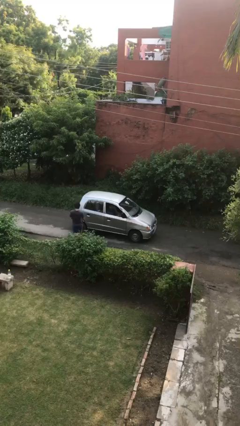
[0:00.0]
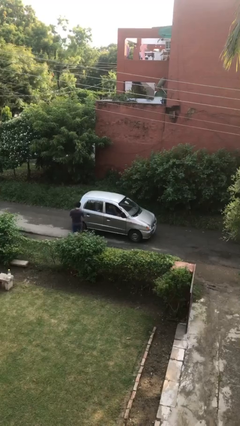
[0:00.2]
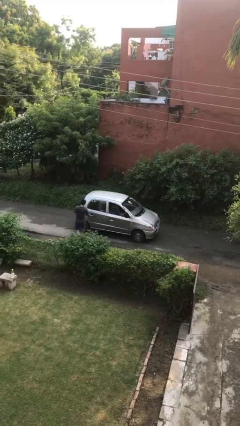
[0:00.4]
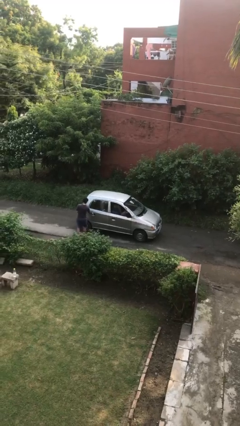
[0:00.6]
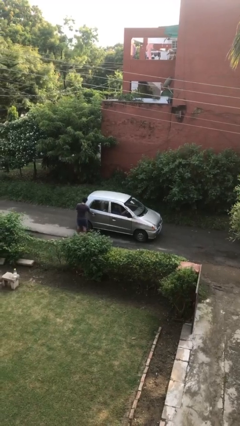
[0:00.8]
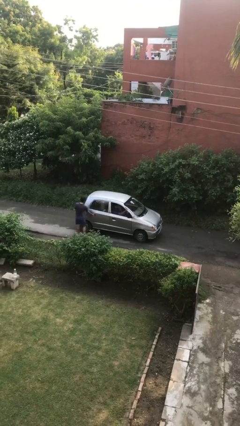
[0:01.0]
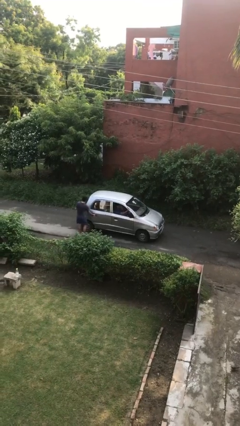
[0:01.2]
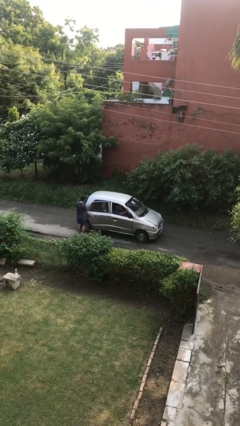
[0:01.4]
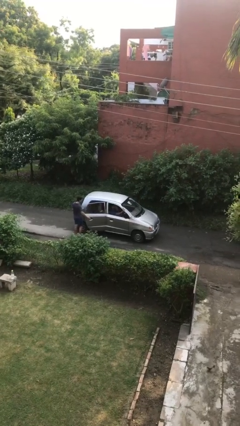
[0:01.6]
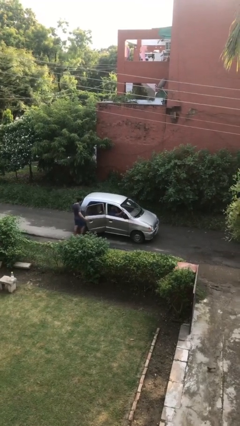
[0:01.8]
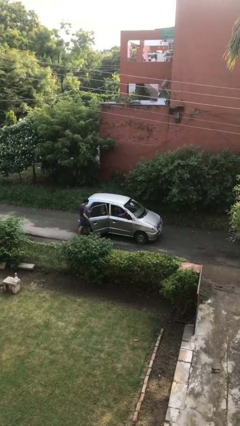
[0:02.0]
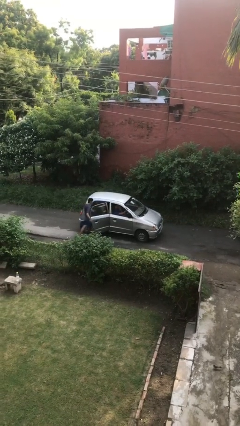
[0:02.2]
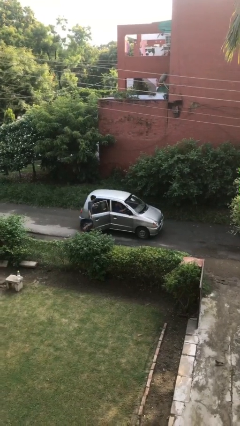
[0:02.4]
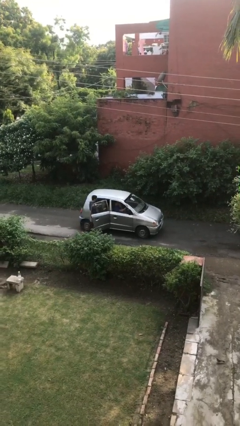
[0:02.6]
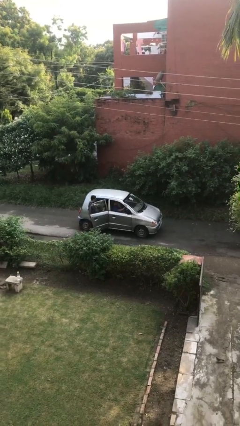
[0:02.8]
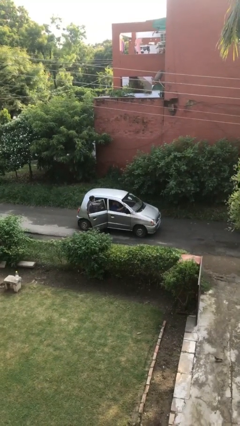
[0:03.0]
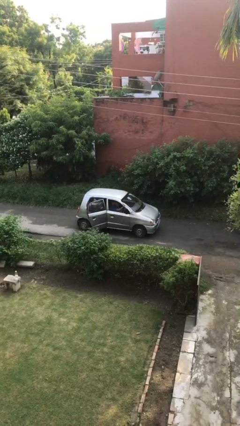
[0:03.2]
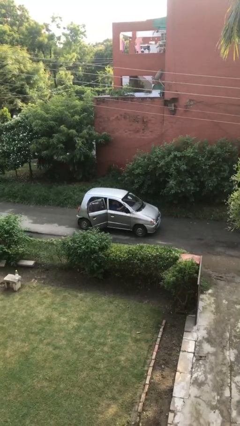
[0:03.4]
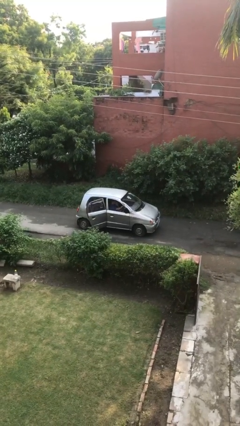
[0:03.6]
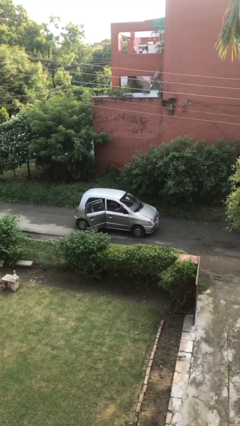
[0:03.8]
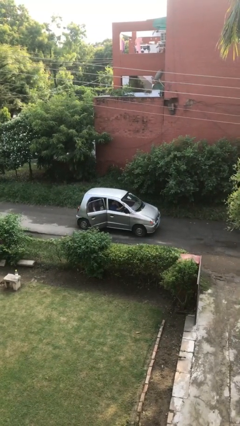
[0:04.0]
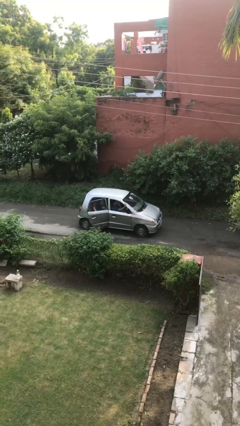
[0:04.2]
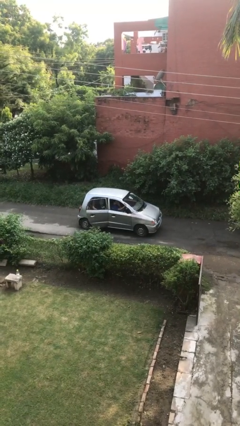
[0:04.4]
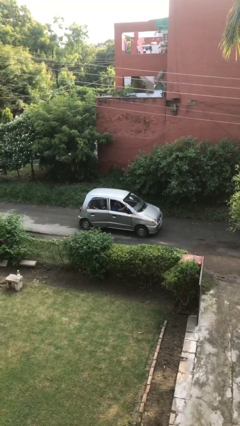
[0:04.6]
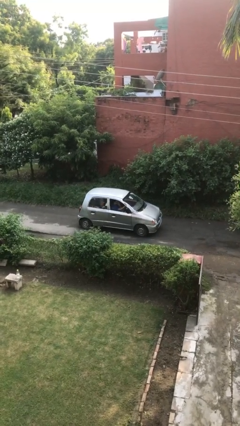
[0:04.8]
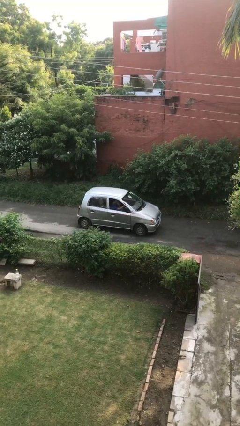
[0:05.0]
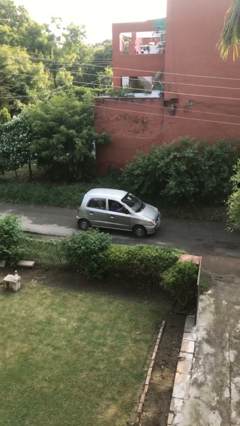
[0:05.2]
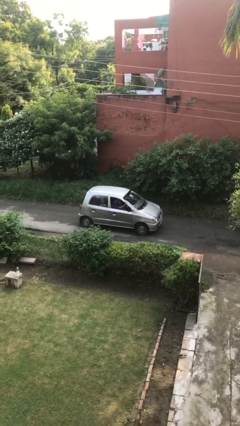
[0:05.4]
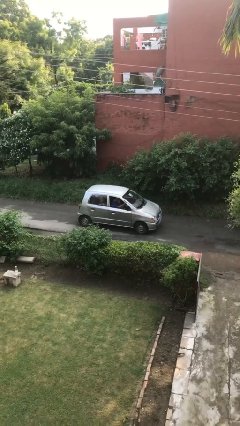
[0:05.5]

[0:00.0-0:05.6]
car picks up person

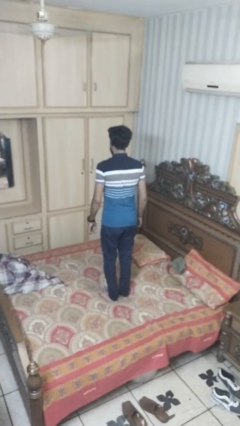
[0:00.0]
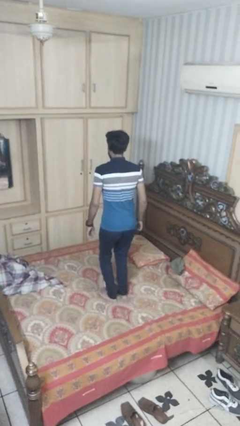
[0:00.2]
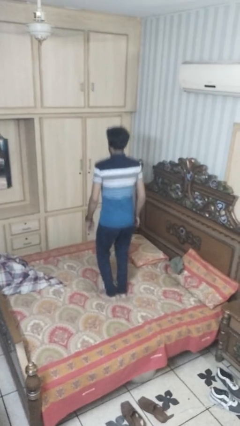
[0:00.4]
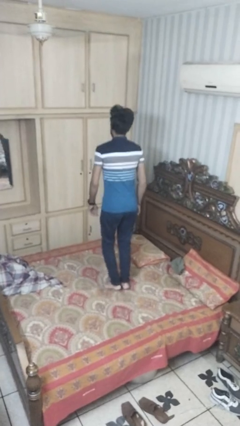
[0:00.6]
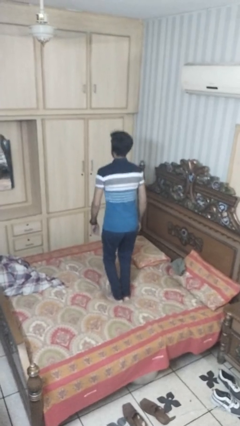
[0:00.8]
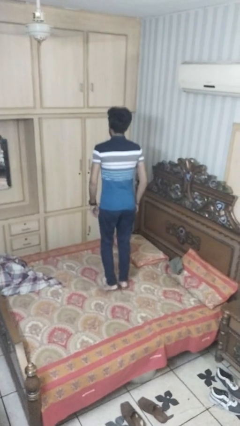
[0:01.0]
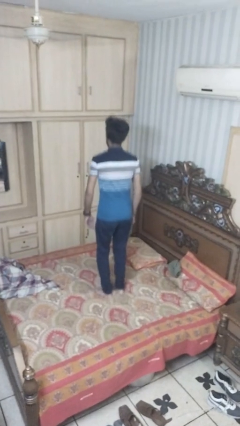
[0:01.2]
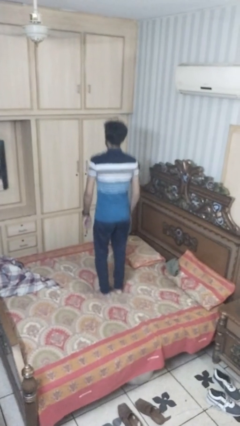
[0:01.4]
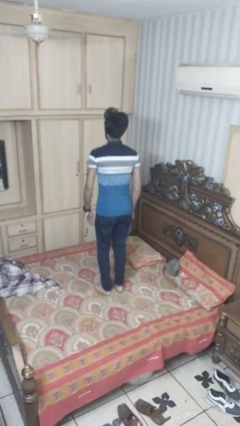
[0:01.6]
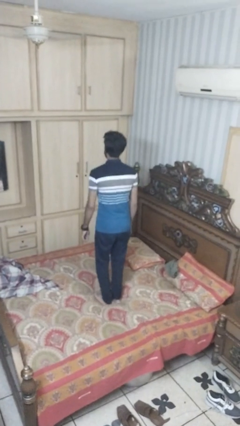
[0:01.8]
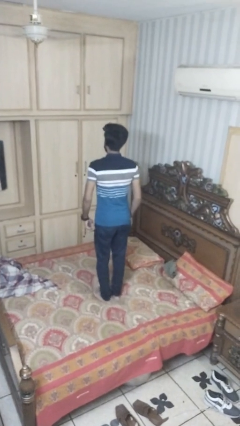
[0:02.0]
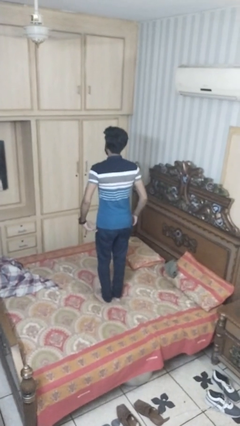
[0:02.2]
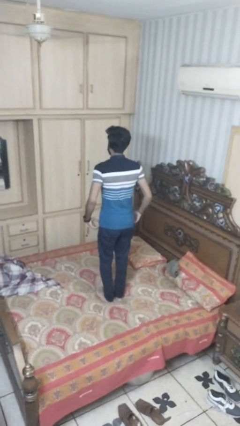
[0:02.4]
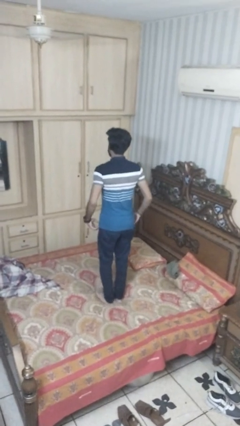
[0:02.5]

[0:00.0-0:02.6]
person jumps on bed

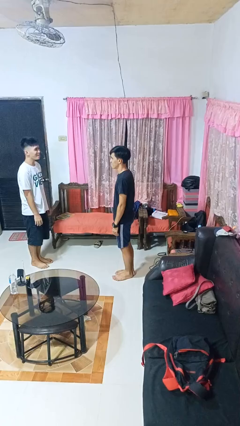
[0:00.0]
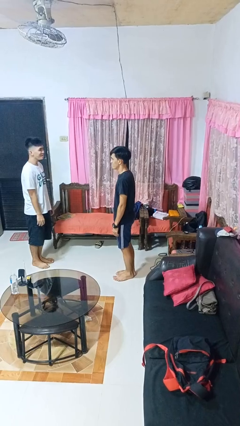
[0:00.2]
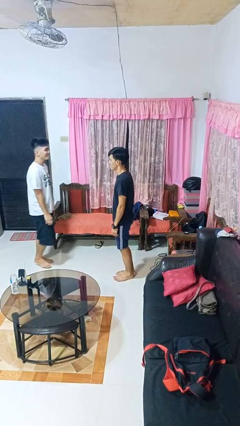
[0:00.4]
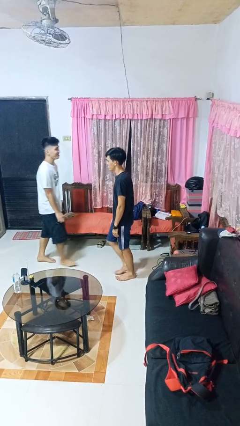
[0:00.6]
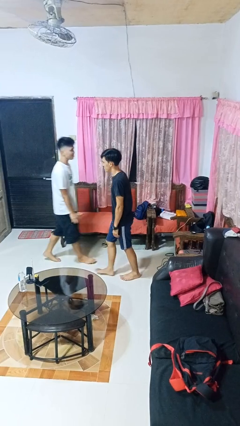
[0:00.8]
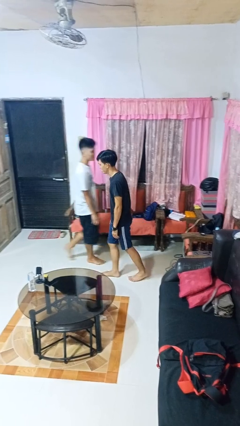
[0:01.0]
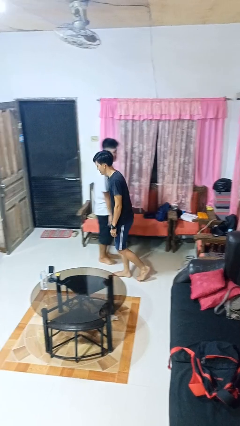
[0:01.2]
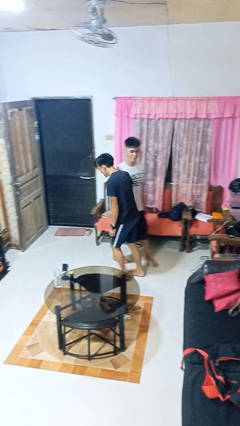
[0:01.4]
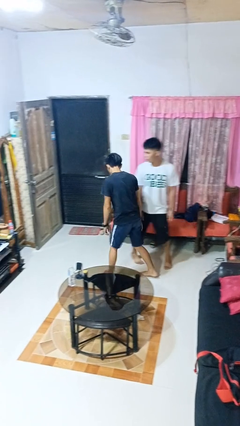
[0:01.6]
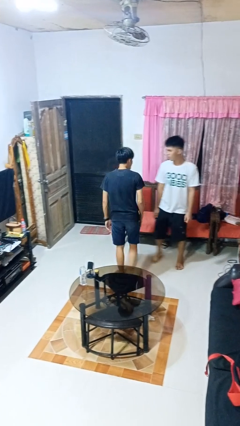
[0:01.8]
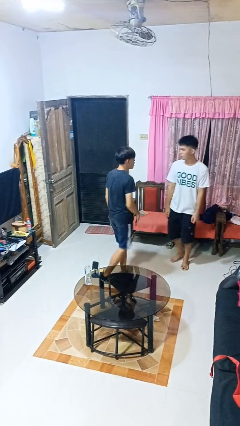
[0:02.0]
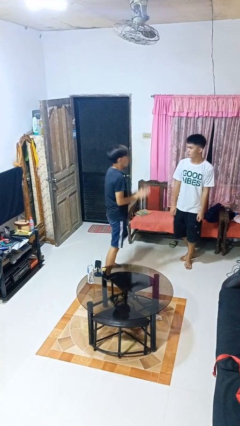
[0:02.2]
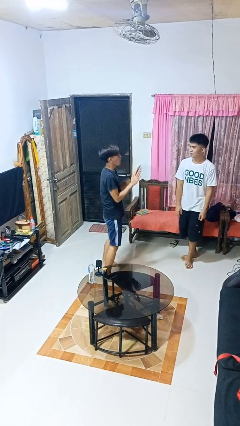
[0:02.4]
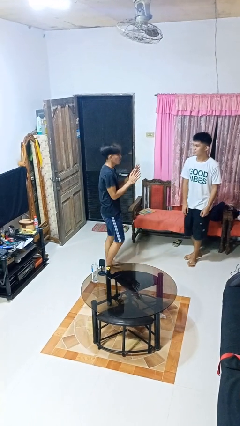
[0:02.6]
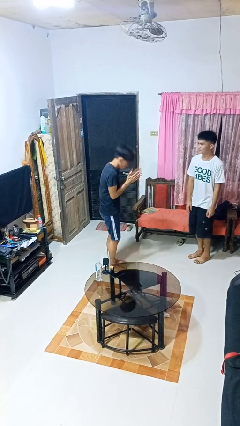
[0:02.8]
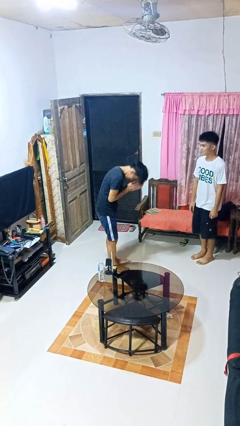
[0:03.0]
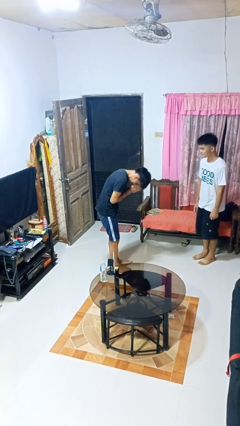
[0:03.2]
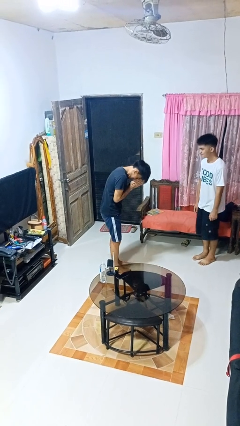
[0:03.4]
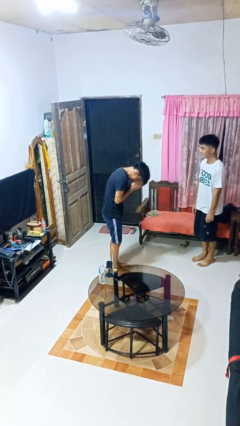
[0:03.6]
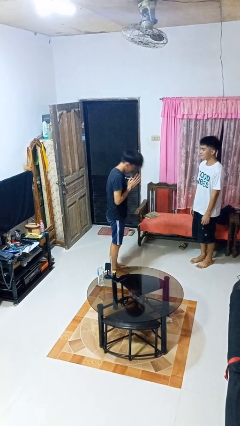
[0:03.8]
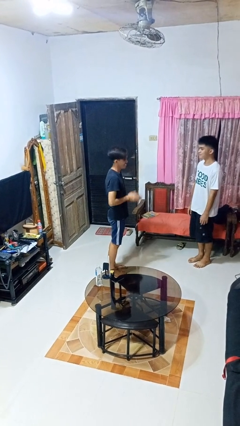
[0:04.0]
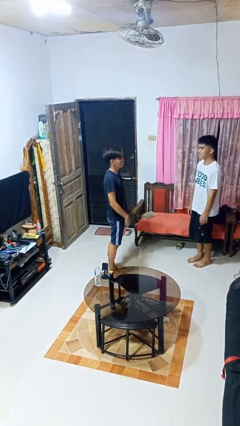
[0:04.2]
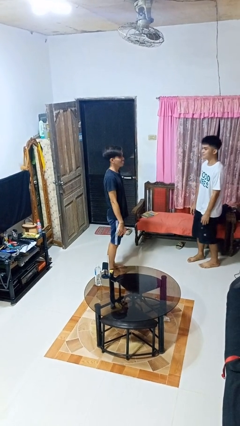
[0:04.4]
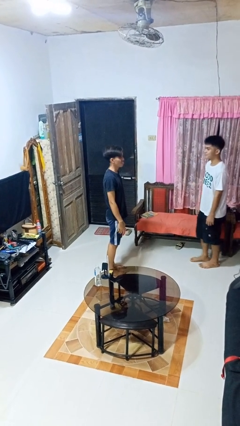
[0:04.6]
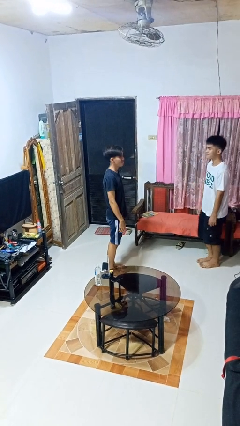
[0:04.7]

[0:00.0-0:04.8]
person bumps into person

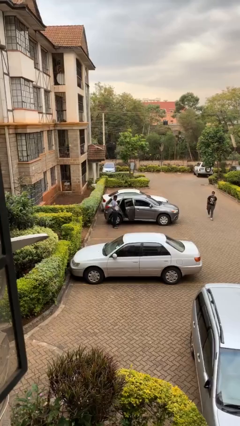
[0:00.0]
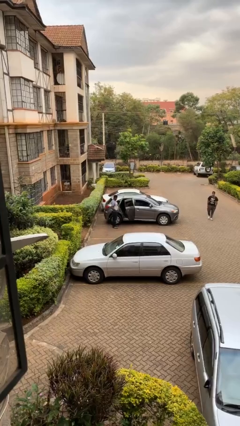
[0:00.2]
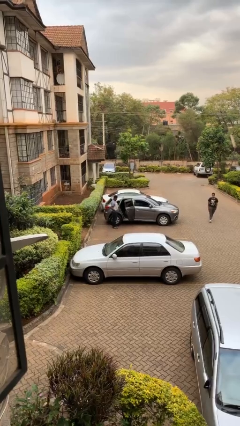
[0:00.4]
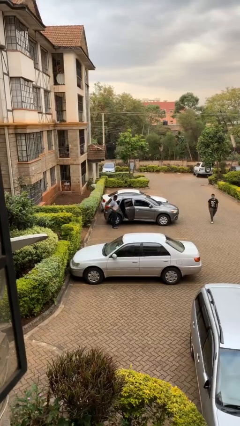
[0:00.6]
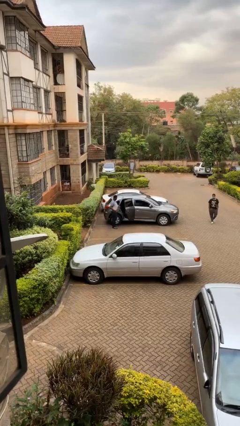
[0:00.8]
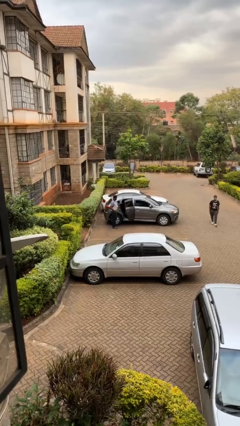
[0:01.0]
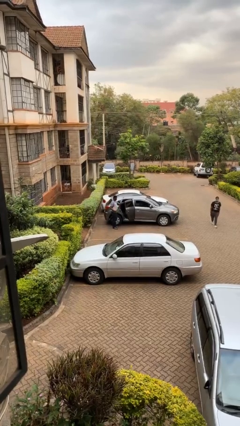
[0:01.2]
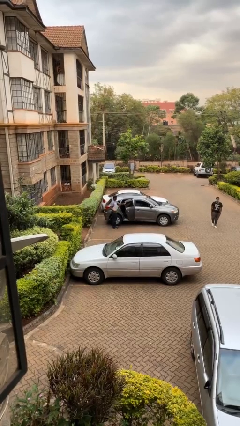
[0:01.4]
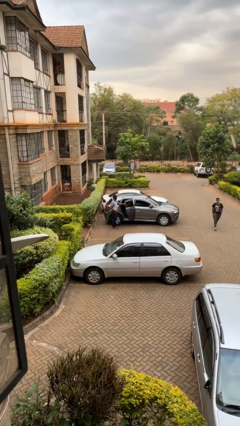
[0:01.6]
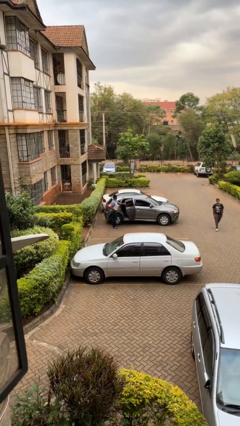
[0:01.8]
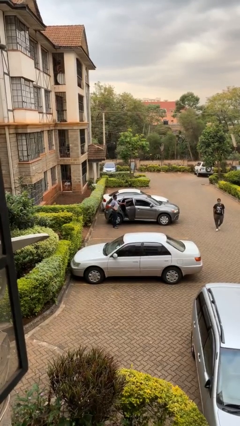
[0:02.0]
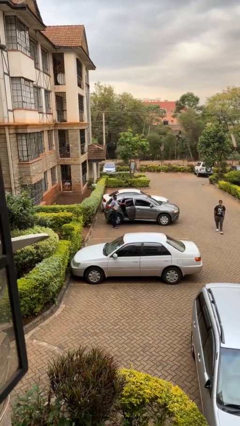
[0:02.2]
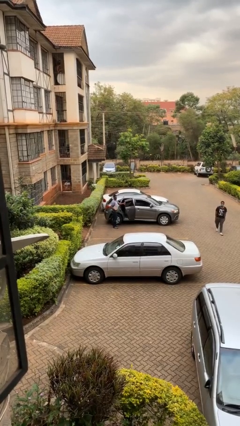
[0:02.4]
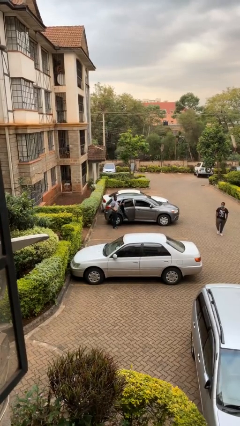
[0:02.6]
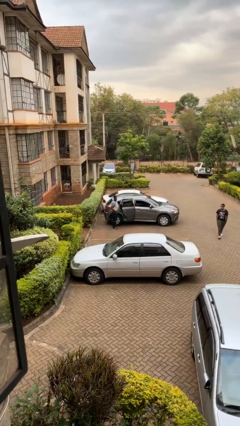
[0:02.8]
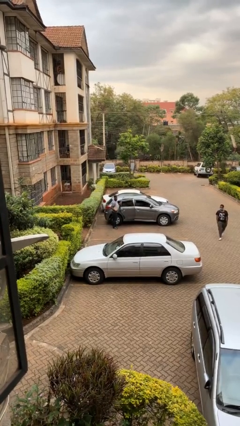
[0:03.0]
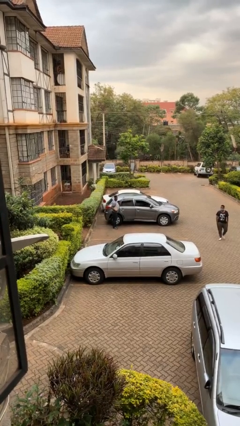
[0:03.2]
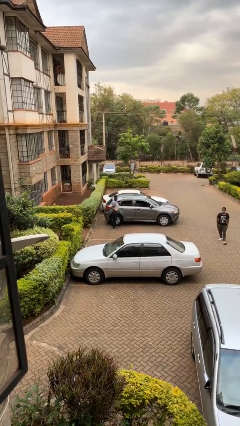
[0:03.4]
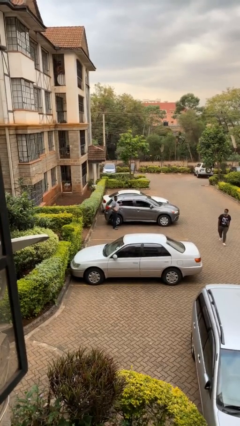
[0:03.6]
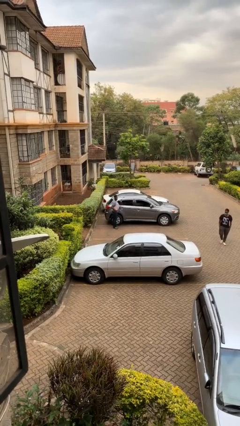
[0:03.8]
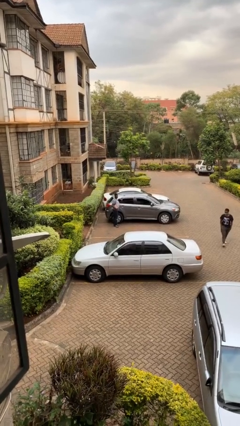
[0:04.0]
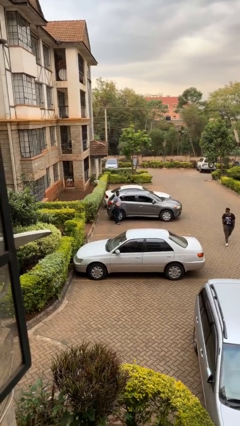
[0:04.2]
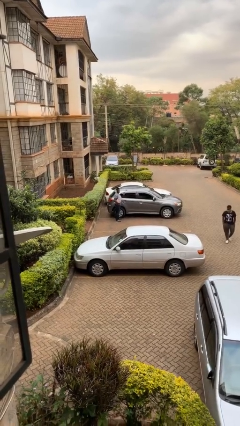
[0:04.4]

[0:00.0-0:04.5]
person closes car door

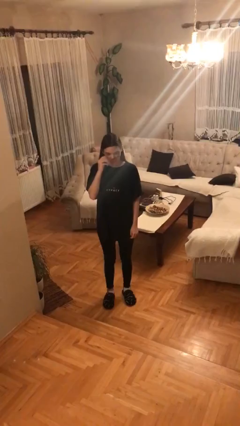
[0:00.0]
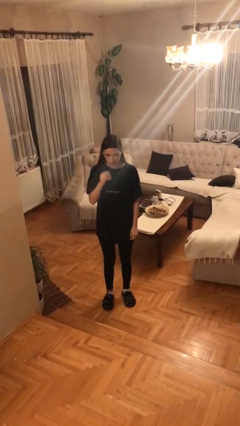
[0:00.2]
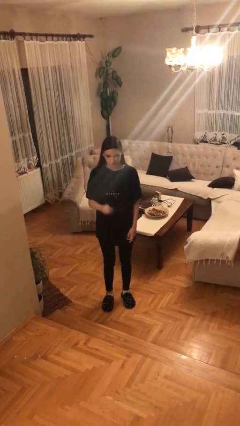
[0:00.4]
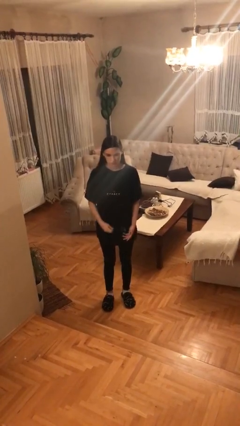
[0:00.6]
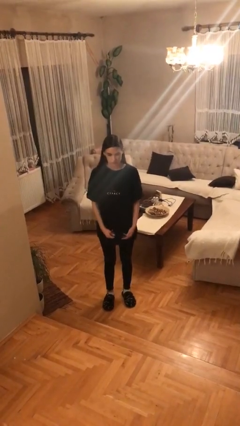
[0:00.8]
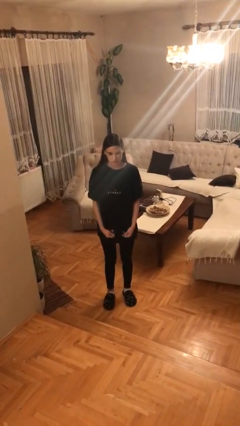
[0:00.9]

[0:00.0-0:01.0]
person takes off glasses
